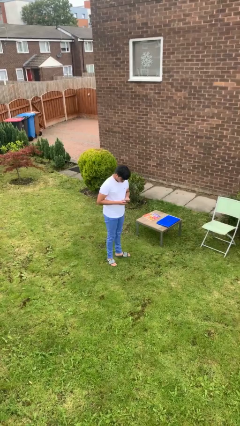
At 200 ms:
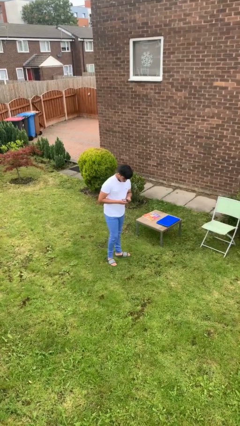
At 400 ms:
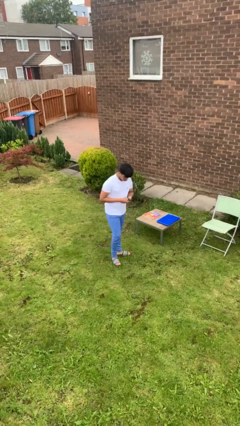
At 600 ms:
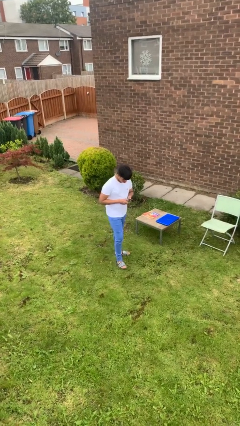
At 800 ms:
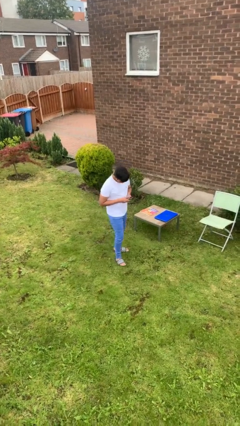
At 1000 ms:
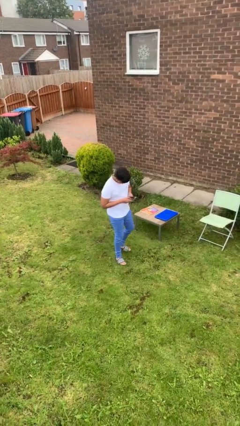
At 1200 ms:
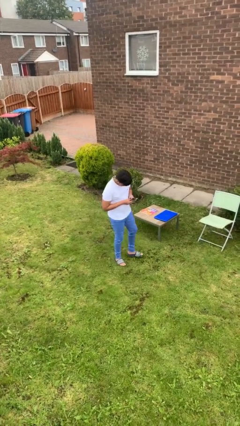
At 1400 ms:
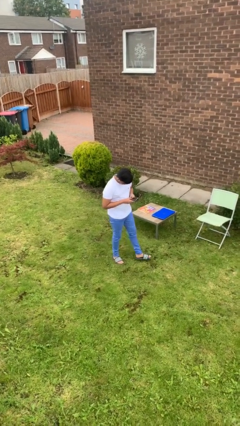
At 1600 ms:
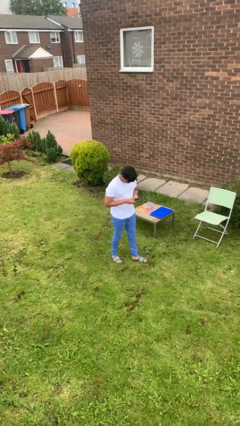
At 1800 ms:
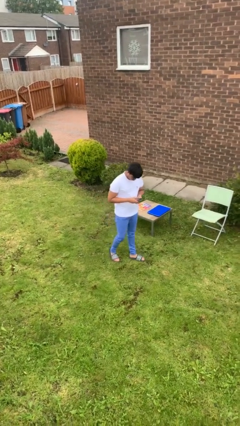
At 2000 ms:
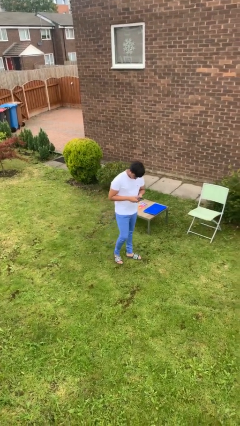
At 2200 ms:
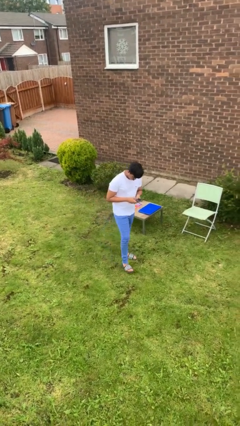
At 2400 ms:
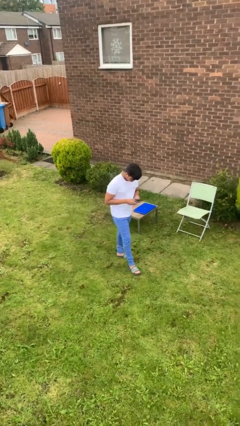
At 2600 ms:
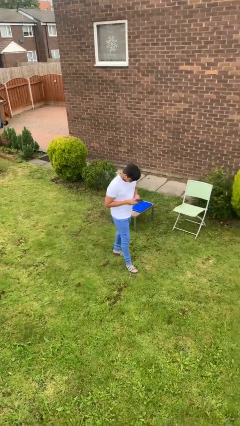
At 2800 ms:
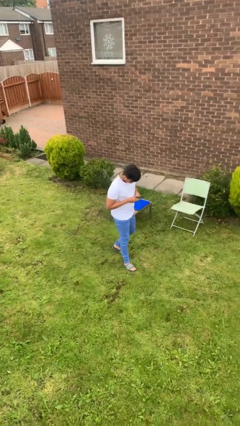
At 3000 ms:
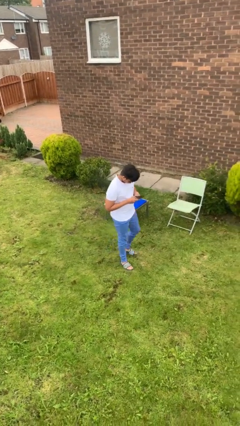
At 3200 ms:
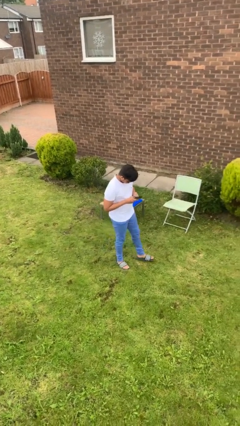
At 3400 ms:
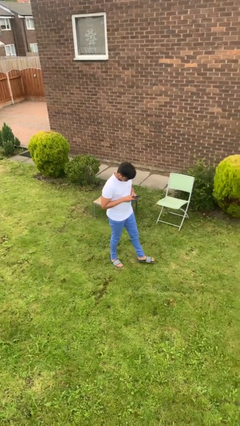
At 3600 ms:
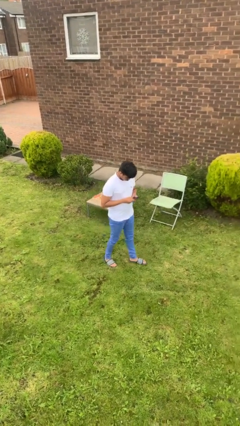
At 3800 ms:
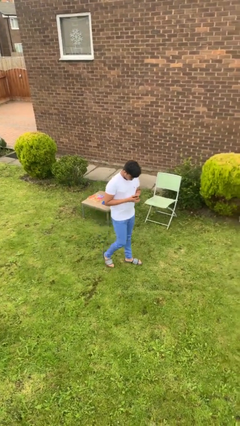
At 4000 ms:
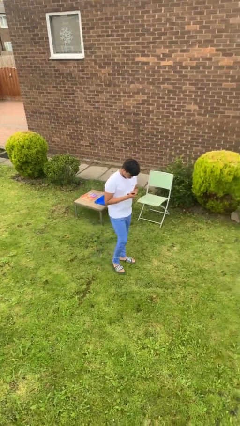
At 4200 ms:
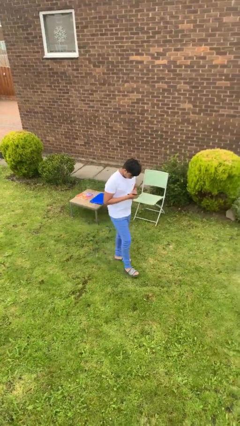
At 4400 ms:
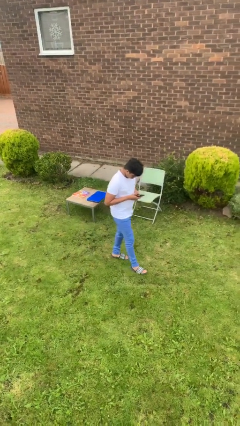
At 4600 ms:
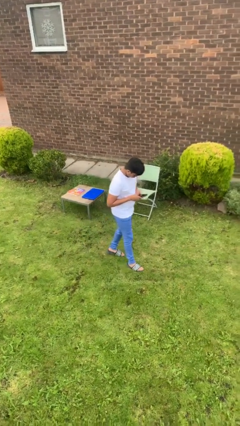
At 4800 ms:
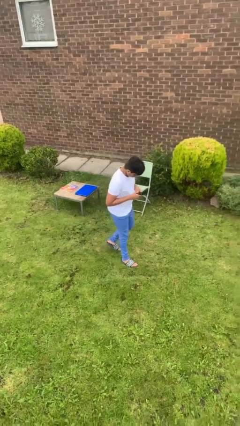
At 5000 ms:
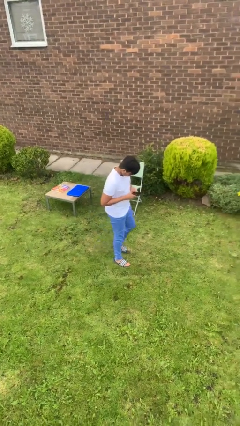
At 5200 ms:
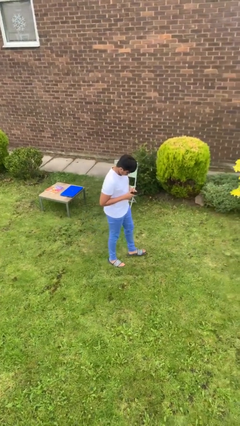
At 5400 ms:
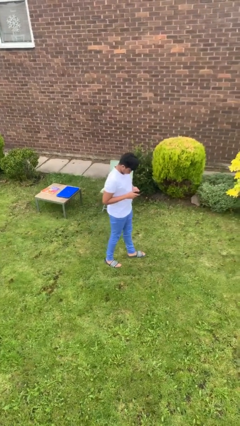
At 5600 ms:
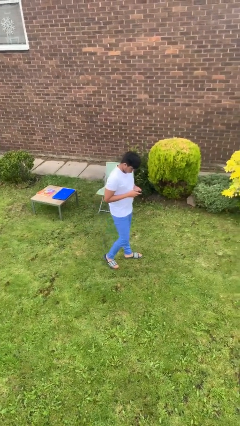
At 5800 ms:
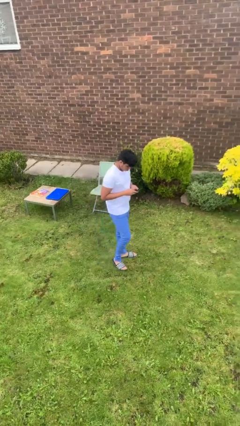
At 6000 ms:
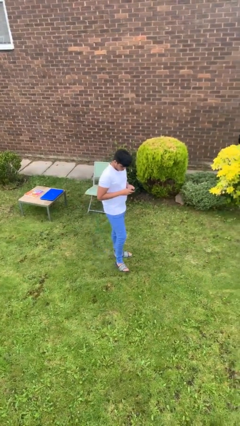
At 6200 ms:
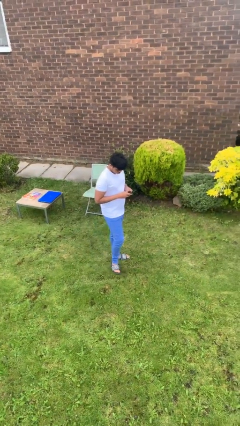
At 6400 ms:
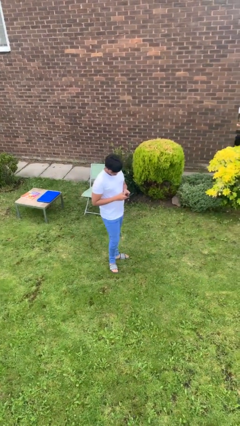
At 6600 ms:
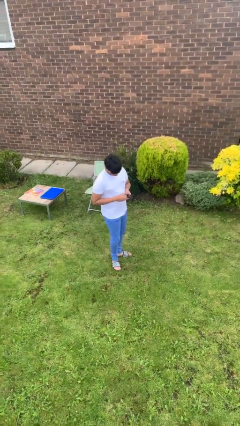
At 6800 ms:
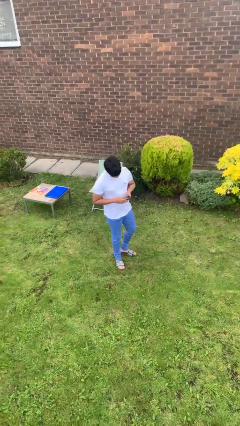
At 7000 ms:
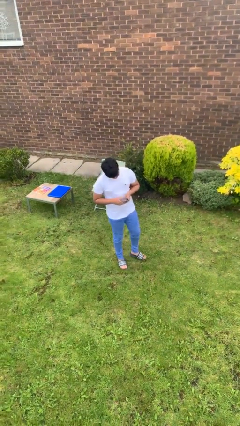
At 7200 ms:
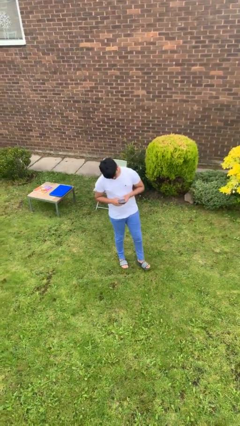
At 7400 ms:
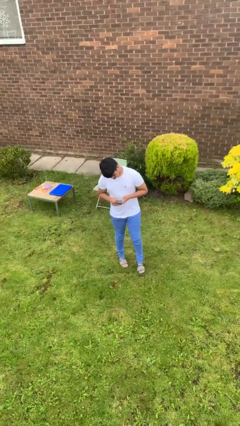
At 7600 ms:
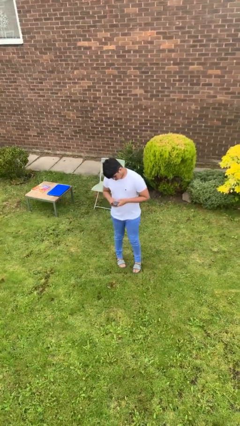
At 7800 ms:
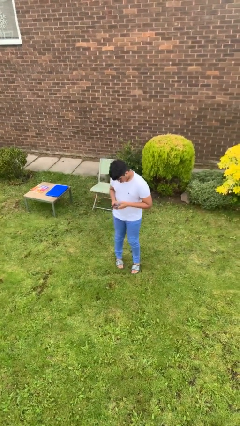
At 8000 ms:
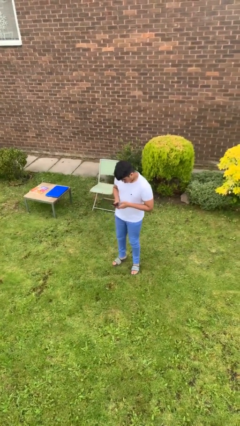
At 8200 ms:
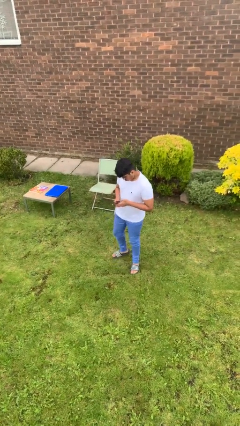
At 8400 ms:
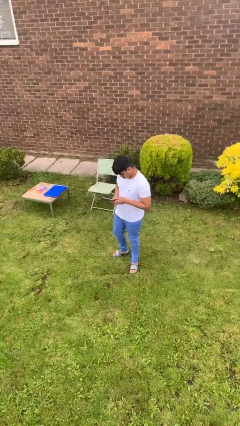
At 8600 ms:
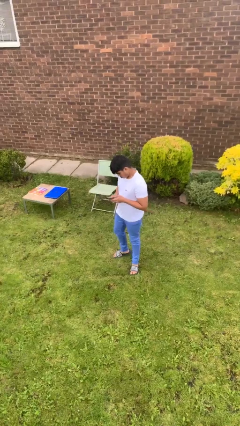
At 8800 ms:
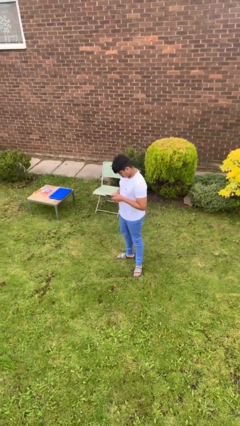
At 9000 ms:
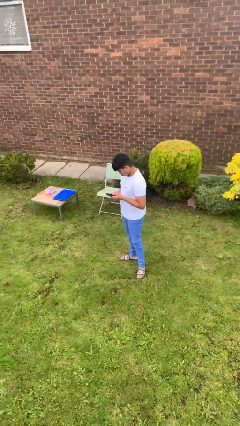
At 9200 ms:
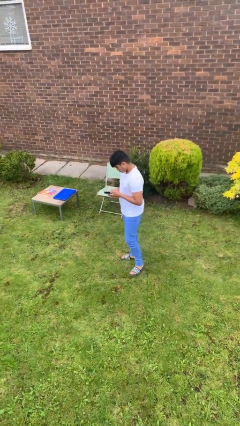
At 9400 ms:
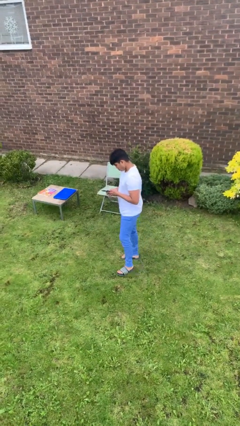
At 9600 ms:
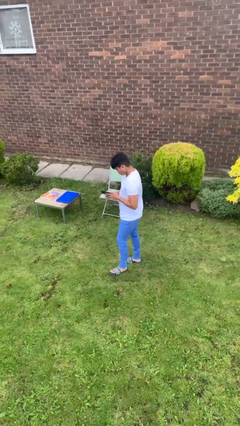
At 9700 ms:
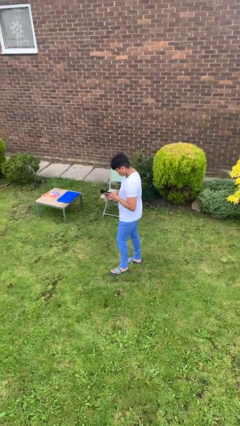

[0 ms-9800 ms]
person texts on phone

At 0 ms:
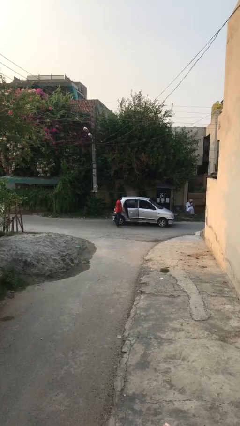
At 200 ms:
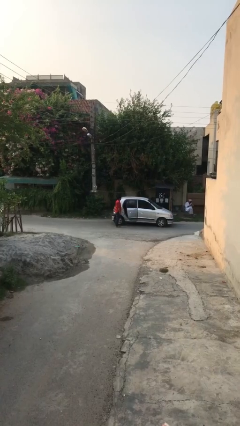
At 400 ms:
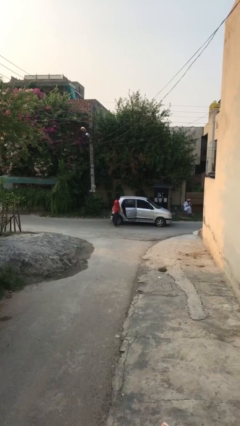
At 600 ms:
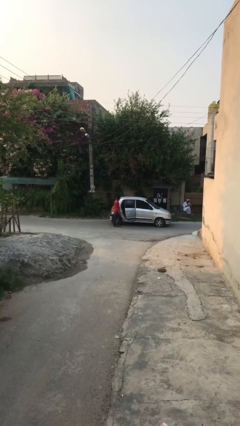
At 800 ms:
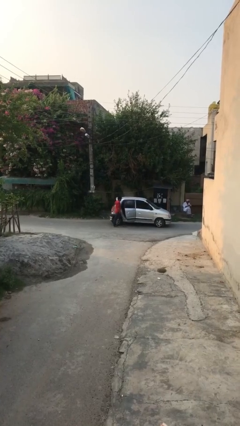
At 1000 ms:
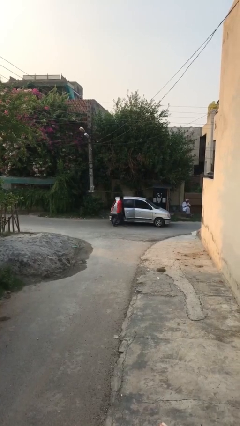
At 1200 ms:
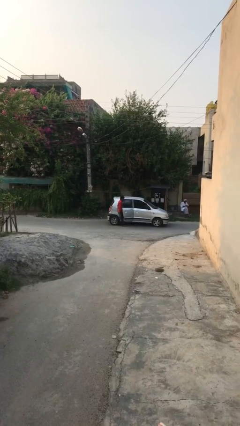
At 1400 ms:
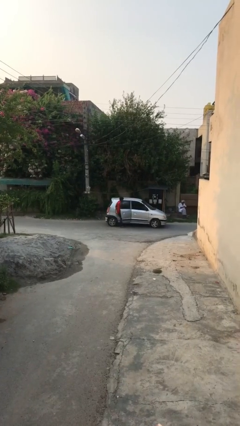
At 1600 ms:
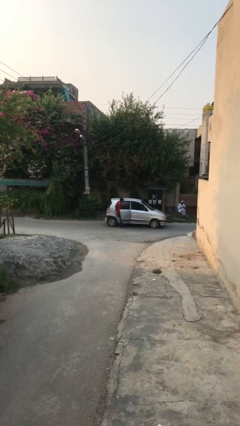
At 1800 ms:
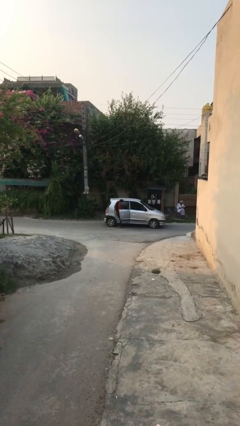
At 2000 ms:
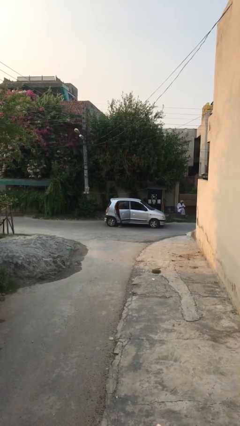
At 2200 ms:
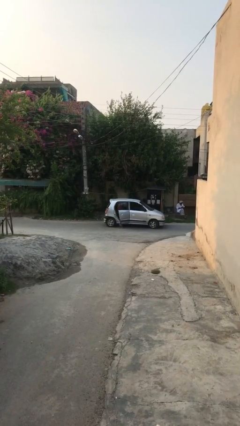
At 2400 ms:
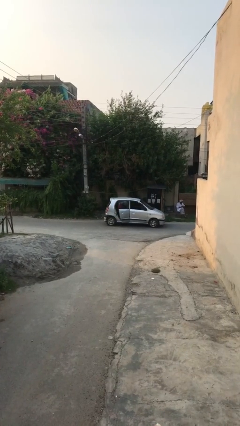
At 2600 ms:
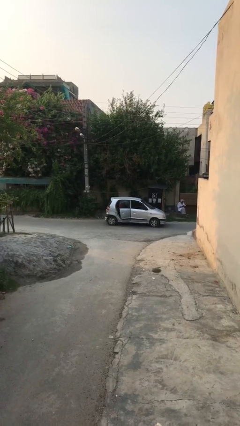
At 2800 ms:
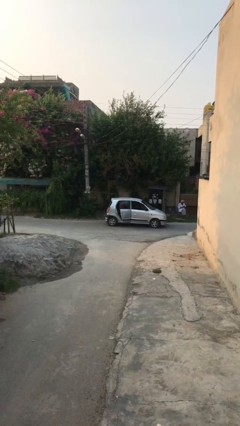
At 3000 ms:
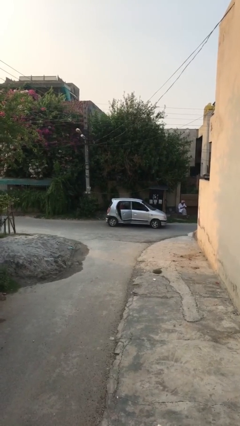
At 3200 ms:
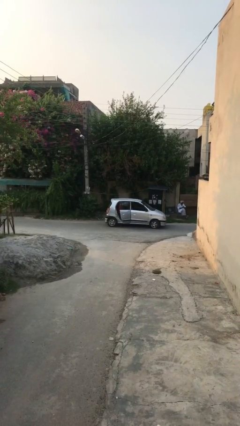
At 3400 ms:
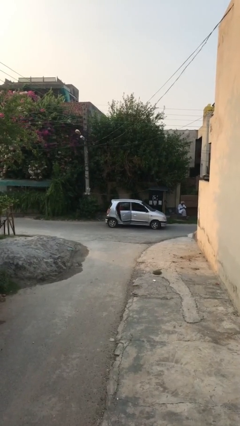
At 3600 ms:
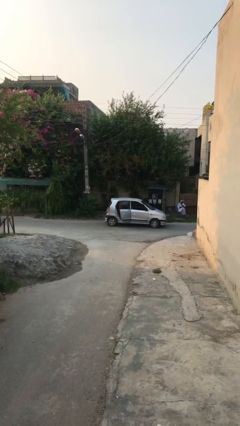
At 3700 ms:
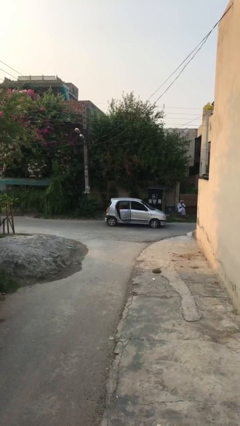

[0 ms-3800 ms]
person enters car

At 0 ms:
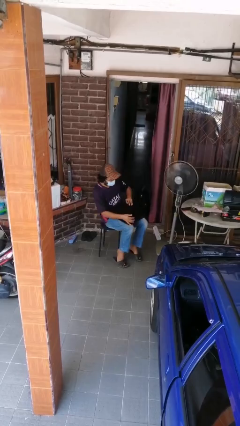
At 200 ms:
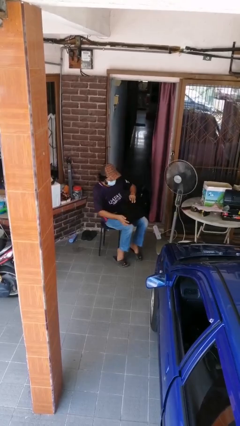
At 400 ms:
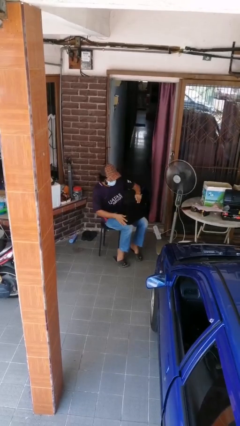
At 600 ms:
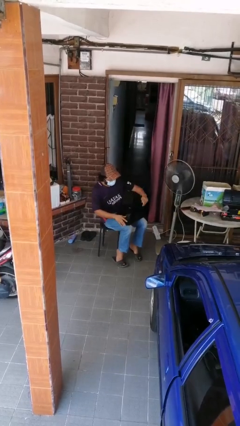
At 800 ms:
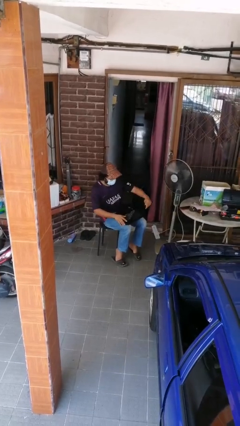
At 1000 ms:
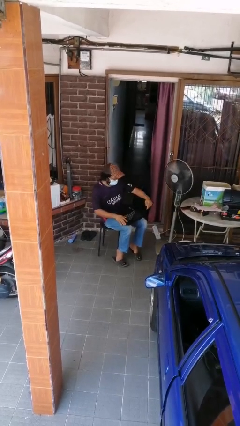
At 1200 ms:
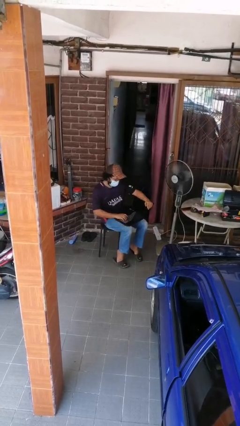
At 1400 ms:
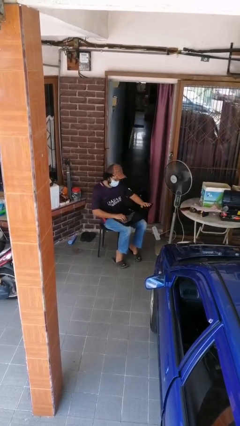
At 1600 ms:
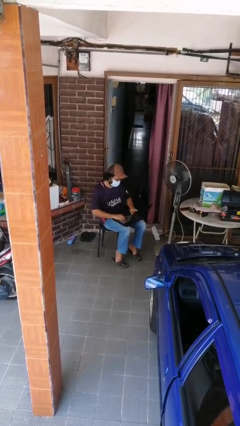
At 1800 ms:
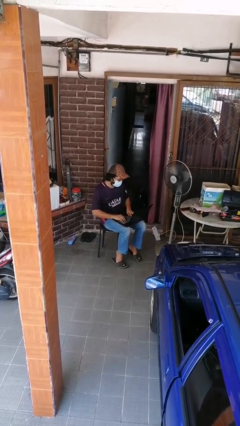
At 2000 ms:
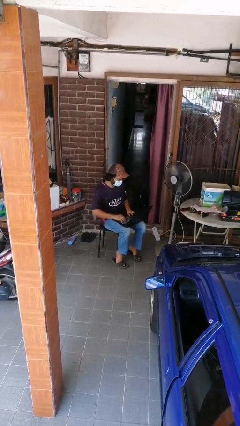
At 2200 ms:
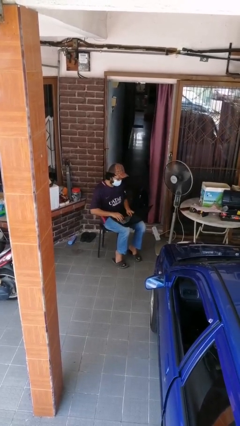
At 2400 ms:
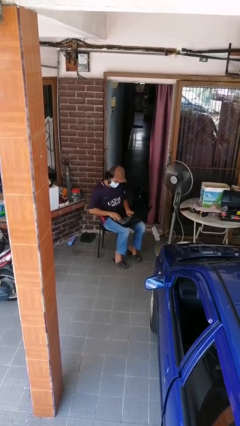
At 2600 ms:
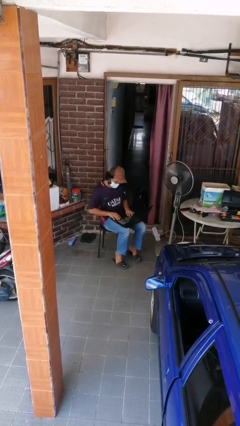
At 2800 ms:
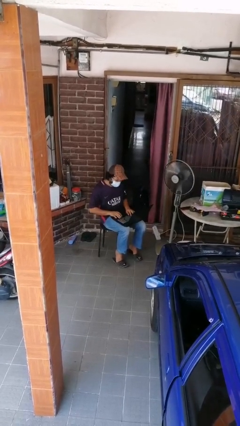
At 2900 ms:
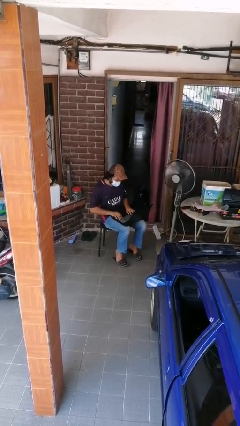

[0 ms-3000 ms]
person interacts with laptop

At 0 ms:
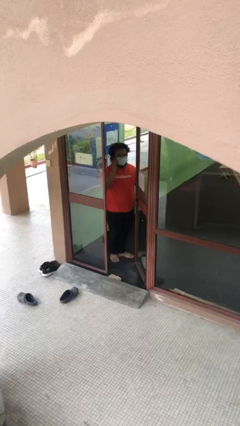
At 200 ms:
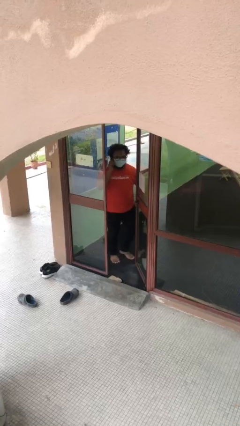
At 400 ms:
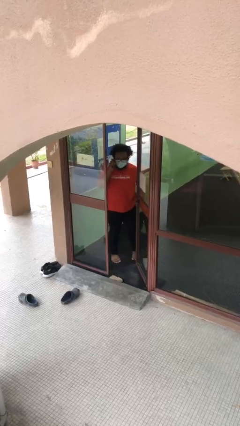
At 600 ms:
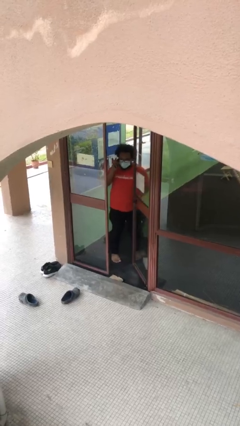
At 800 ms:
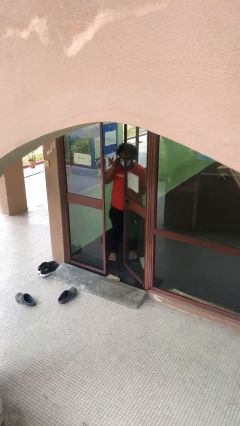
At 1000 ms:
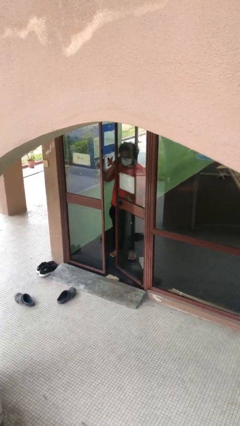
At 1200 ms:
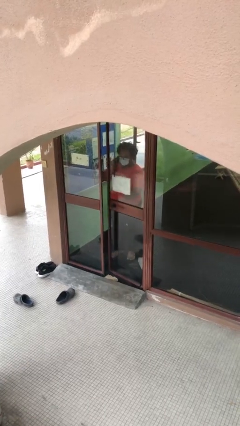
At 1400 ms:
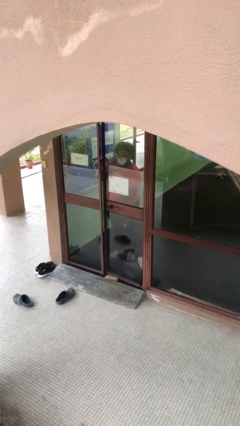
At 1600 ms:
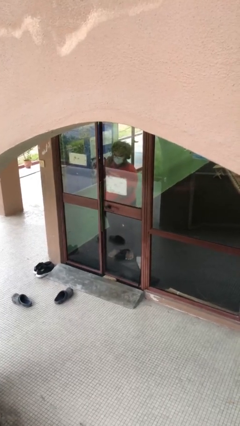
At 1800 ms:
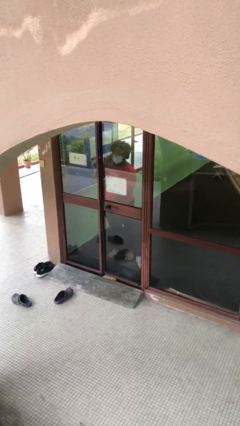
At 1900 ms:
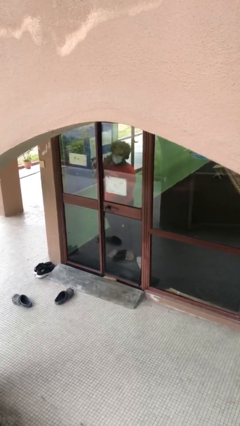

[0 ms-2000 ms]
person closes facility door
